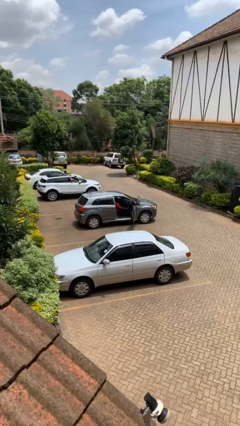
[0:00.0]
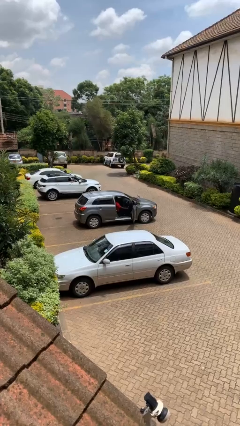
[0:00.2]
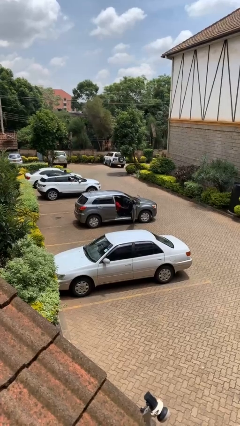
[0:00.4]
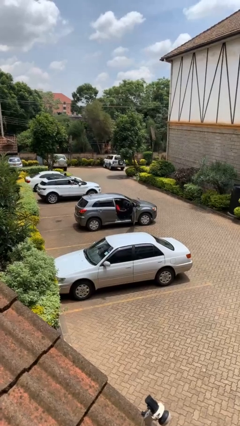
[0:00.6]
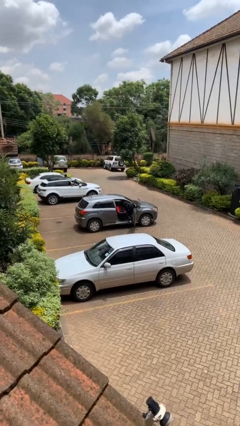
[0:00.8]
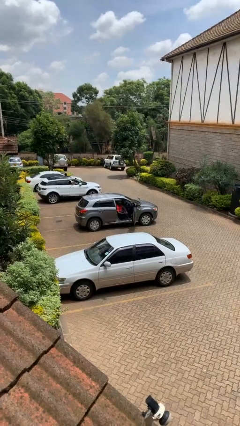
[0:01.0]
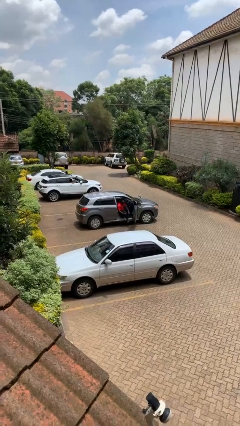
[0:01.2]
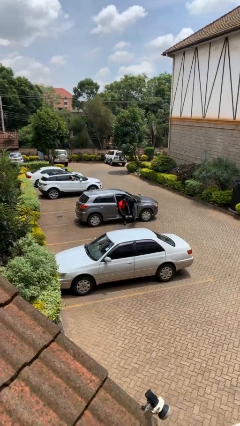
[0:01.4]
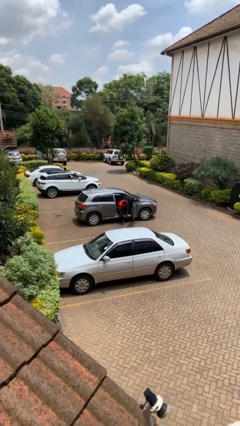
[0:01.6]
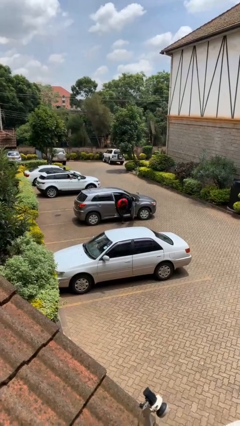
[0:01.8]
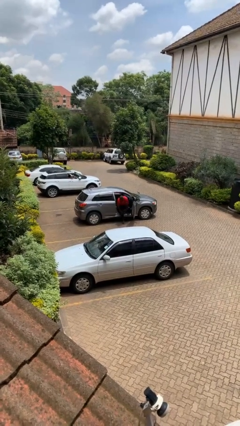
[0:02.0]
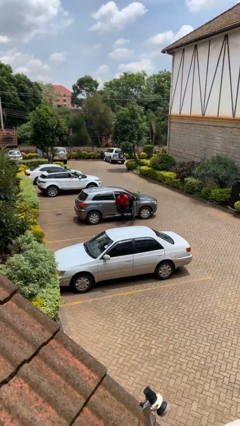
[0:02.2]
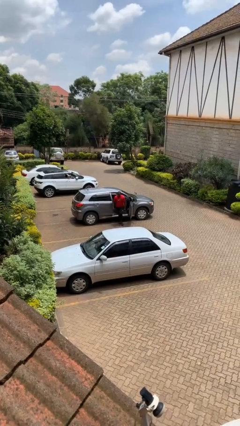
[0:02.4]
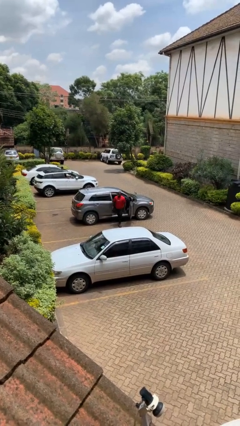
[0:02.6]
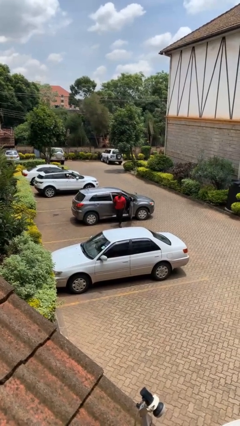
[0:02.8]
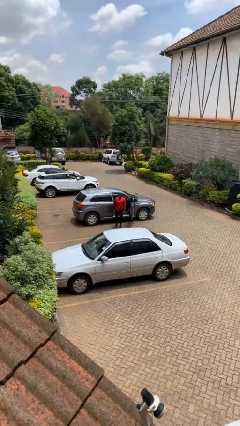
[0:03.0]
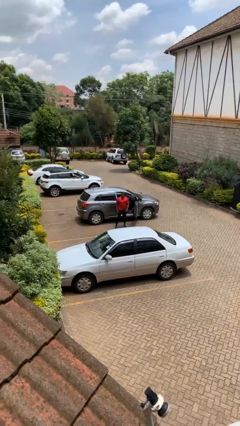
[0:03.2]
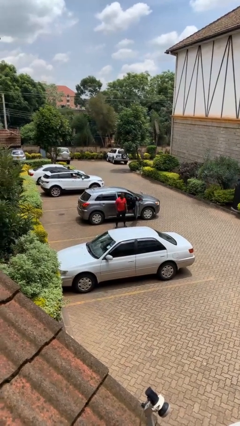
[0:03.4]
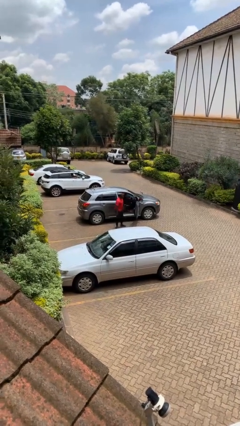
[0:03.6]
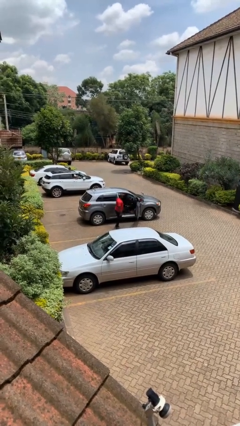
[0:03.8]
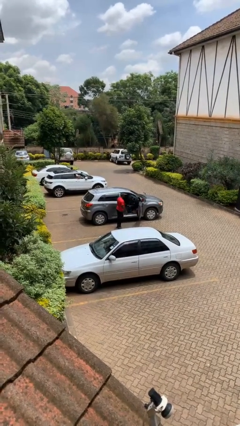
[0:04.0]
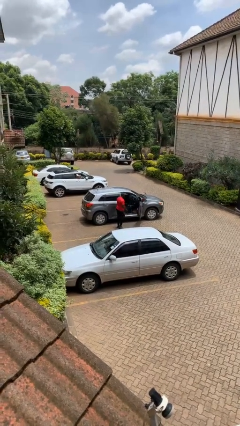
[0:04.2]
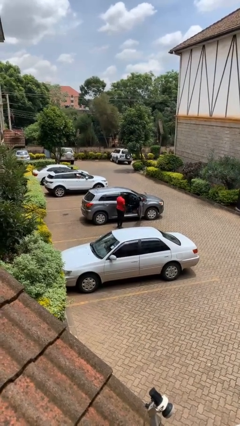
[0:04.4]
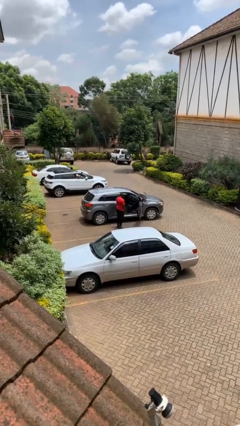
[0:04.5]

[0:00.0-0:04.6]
person exits car

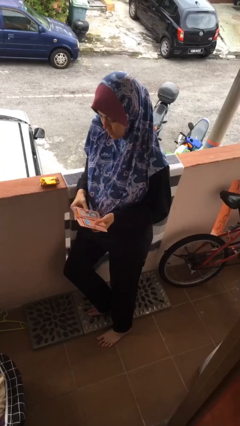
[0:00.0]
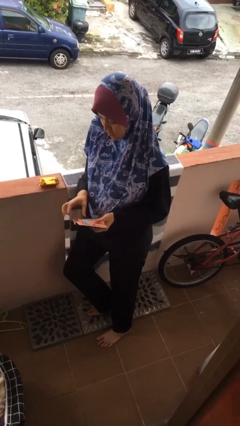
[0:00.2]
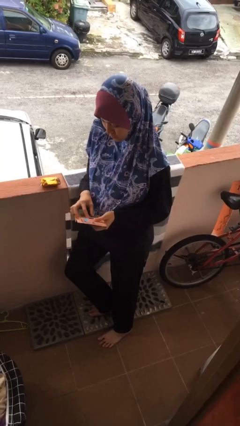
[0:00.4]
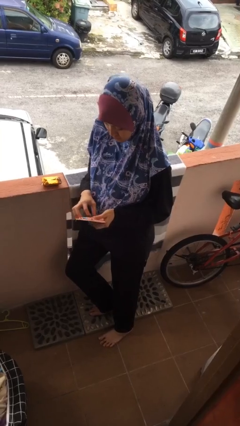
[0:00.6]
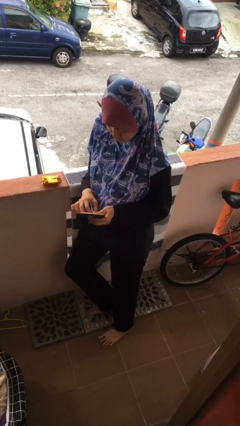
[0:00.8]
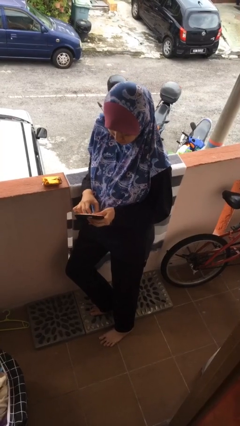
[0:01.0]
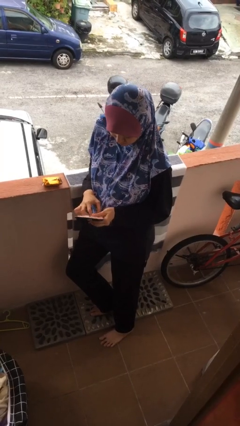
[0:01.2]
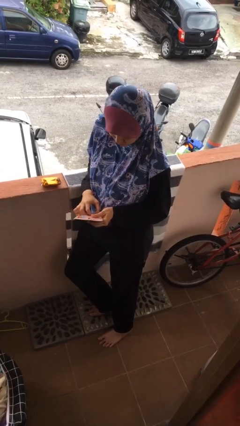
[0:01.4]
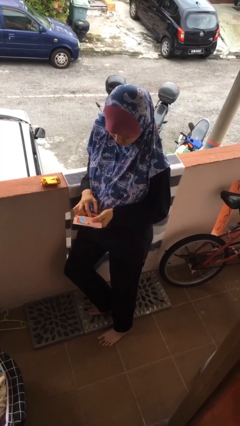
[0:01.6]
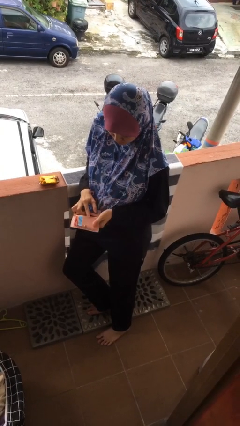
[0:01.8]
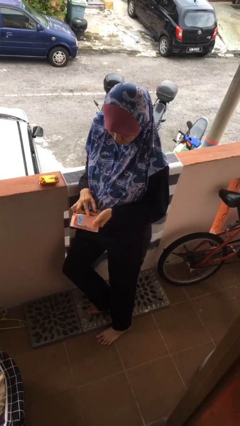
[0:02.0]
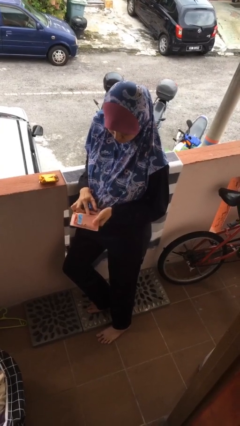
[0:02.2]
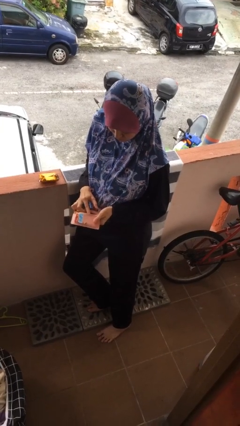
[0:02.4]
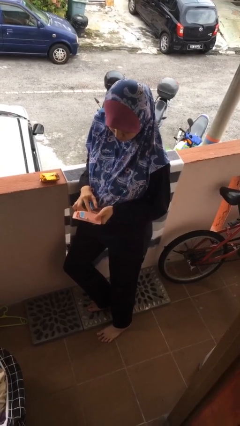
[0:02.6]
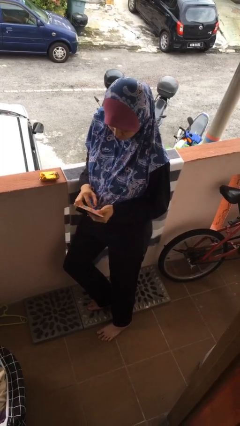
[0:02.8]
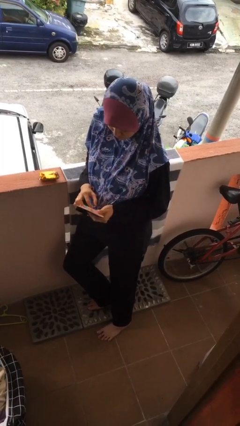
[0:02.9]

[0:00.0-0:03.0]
person searches in purse

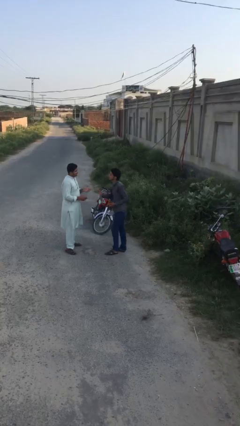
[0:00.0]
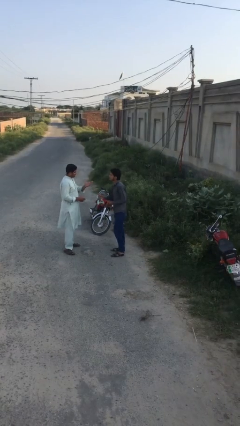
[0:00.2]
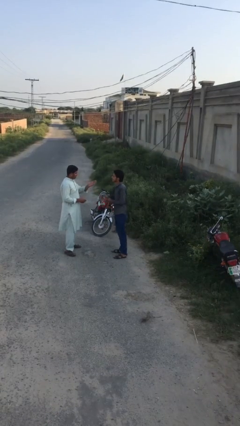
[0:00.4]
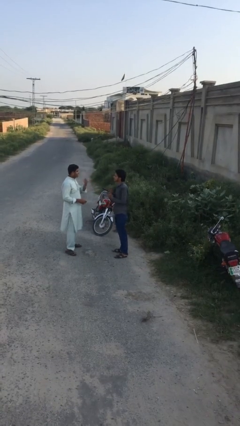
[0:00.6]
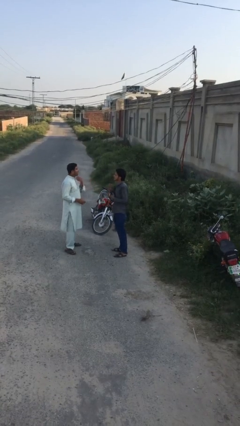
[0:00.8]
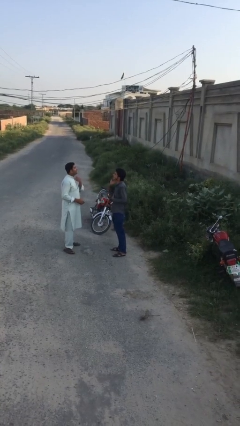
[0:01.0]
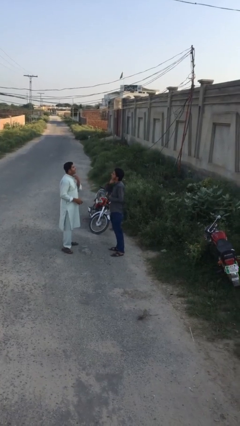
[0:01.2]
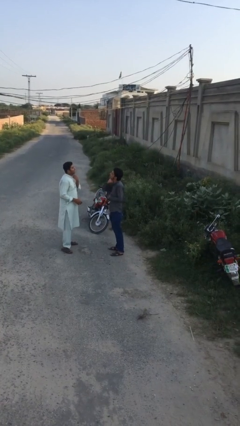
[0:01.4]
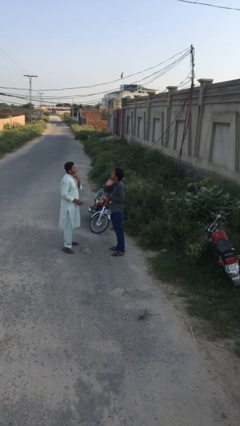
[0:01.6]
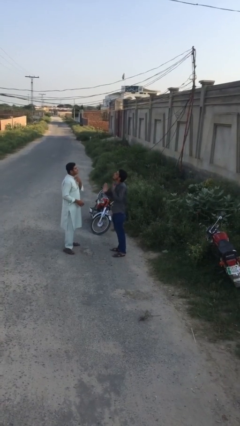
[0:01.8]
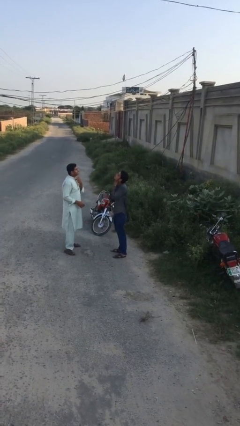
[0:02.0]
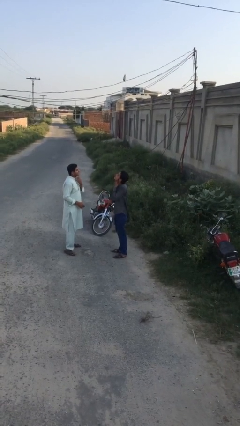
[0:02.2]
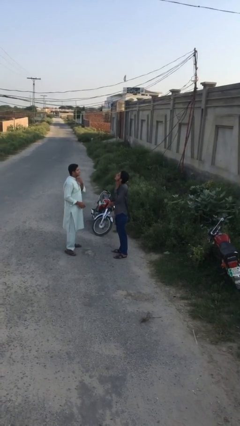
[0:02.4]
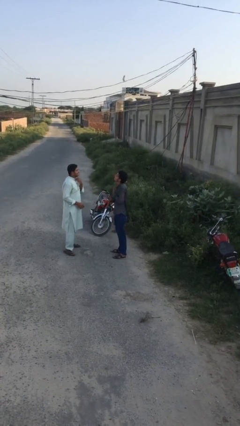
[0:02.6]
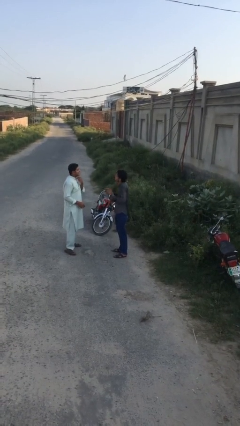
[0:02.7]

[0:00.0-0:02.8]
person talks to person

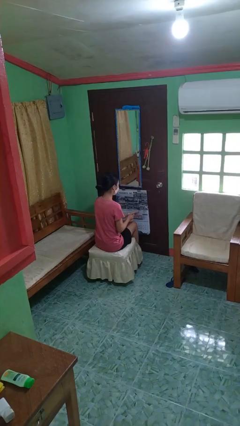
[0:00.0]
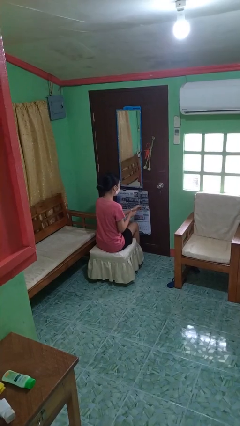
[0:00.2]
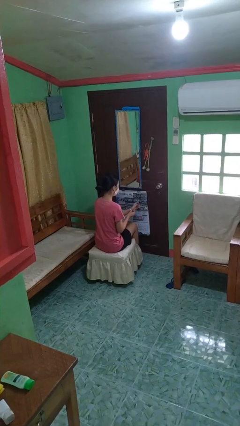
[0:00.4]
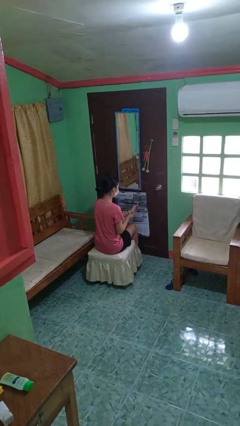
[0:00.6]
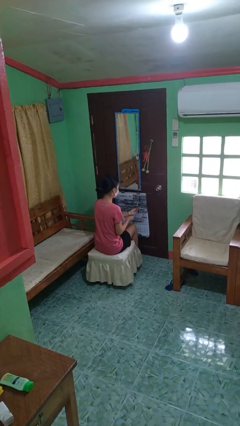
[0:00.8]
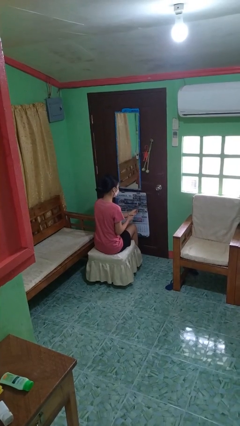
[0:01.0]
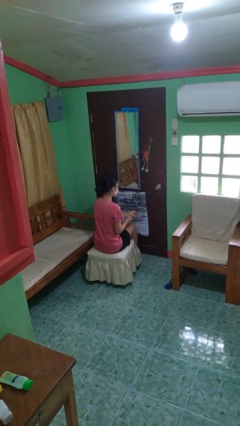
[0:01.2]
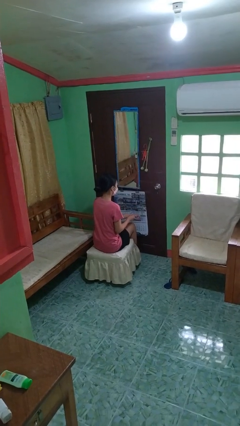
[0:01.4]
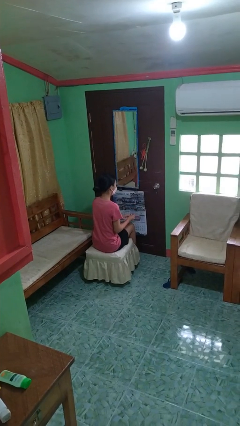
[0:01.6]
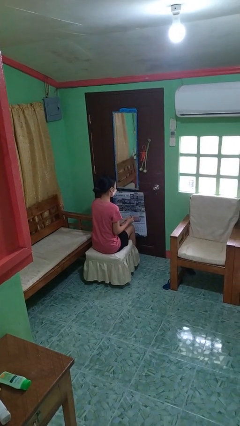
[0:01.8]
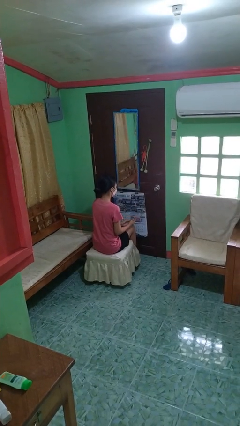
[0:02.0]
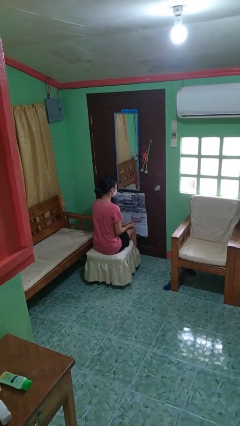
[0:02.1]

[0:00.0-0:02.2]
person takes off wristwatch

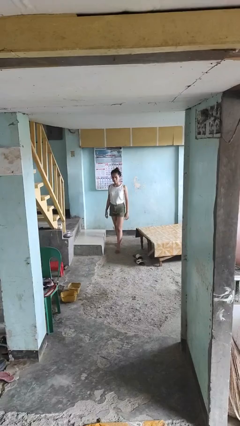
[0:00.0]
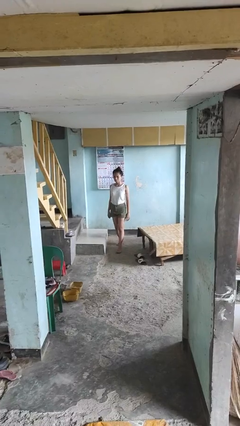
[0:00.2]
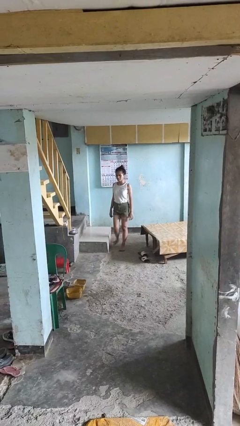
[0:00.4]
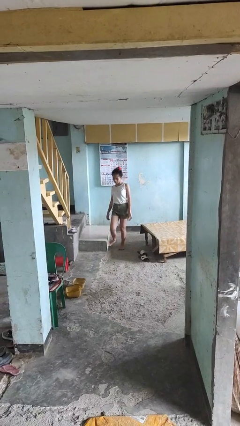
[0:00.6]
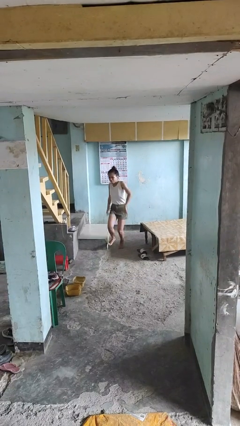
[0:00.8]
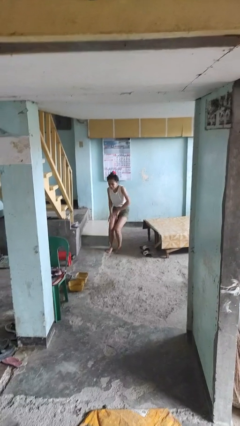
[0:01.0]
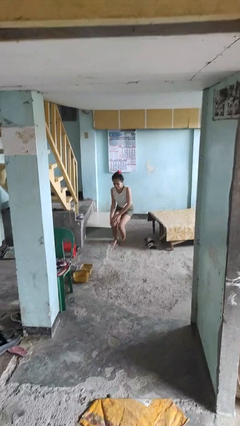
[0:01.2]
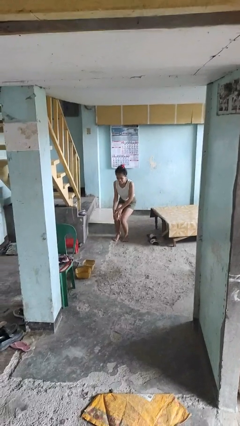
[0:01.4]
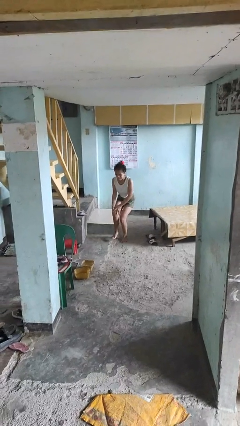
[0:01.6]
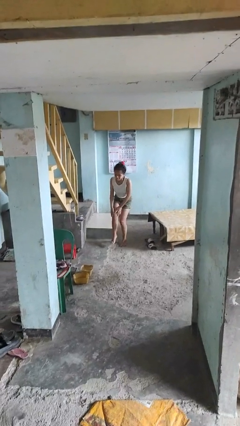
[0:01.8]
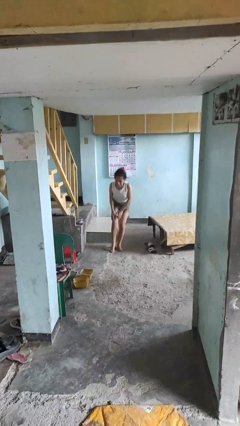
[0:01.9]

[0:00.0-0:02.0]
person stubs toe

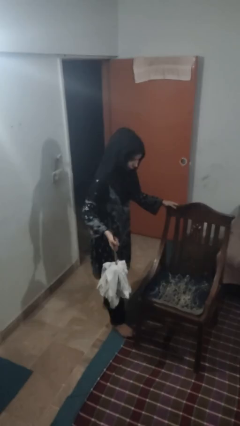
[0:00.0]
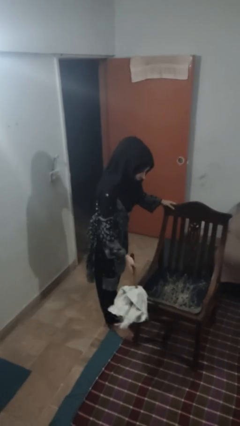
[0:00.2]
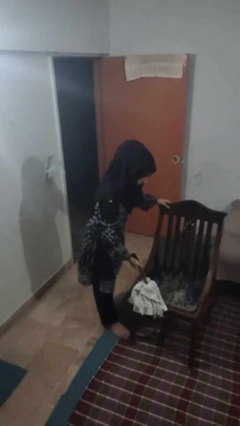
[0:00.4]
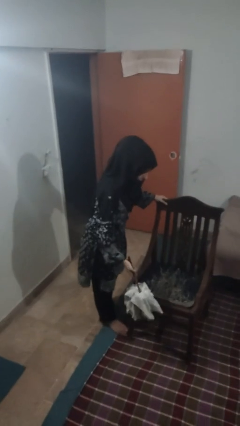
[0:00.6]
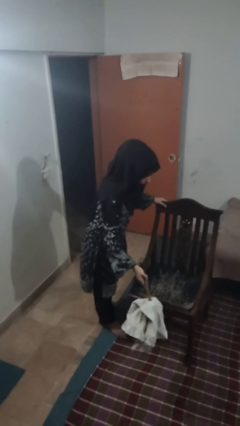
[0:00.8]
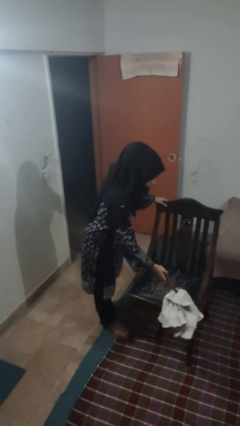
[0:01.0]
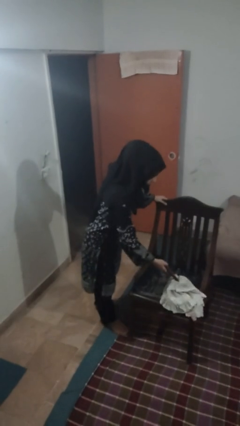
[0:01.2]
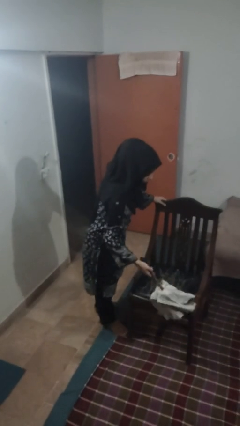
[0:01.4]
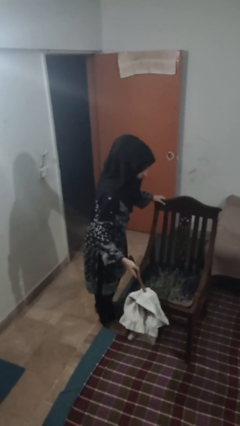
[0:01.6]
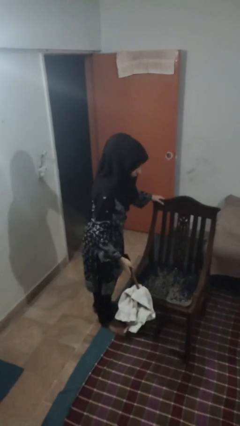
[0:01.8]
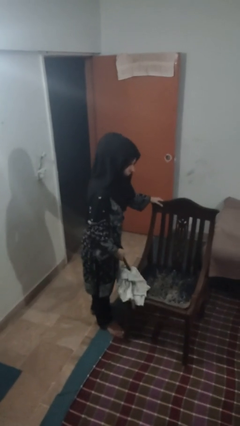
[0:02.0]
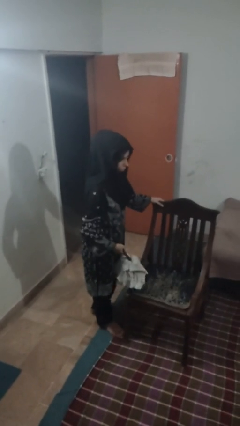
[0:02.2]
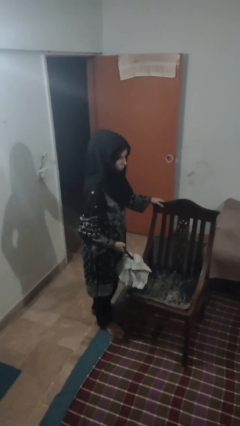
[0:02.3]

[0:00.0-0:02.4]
person dusts furniture
